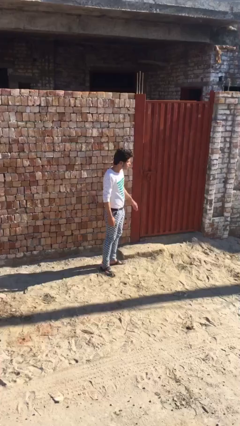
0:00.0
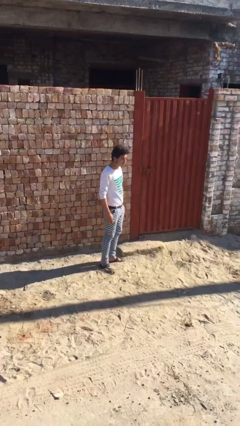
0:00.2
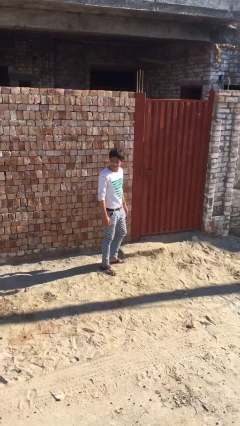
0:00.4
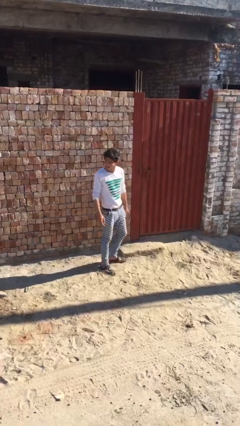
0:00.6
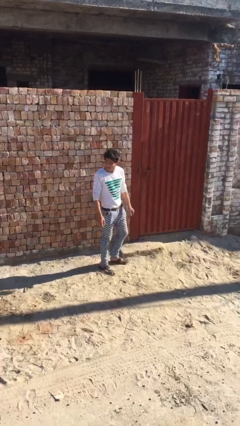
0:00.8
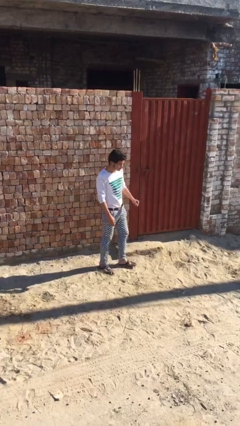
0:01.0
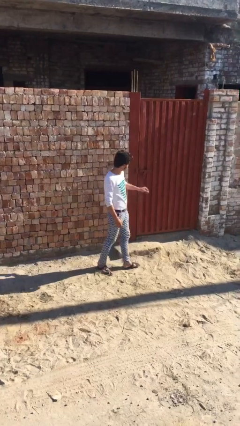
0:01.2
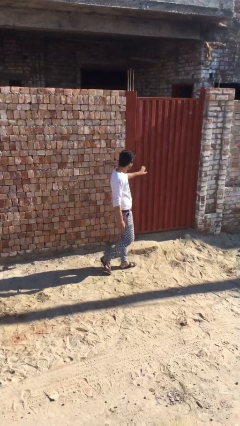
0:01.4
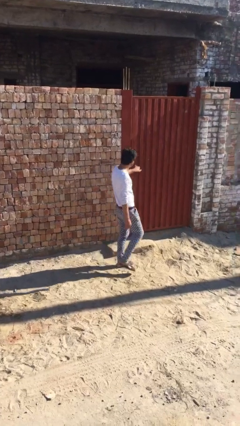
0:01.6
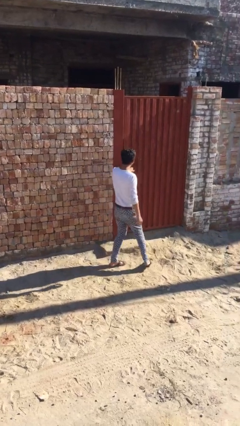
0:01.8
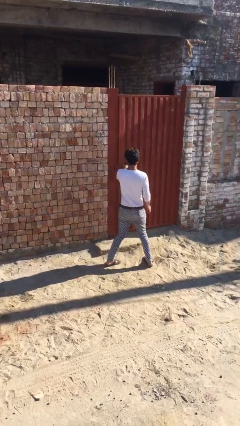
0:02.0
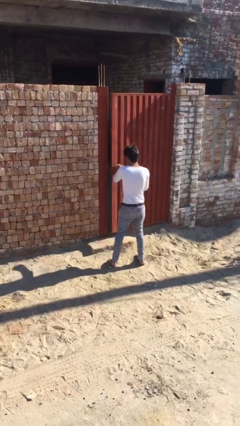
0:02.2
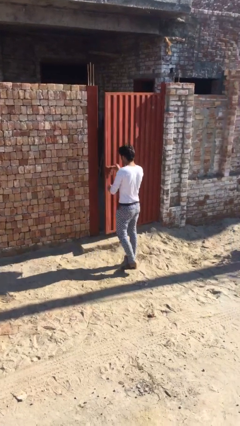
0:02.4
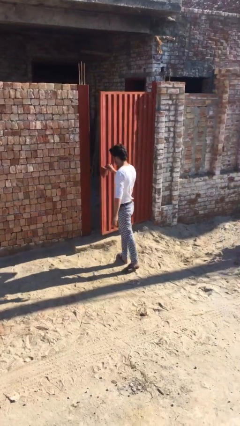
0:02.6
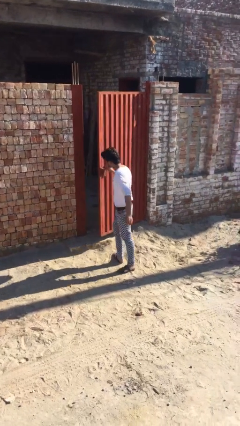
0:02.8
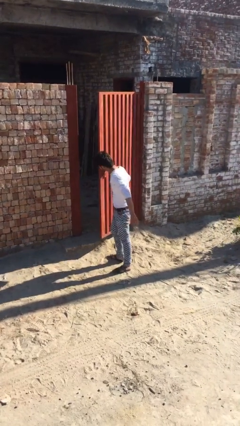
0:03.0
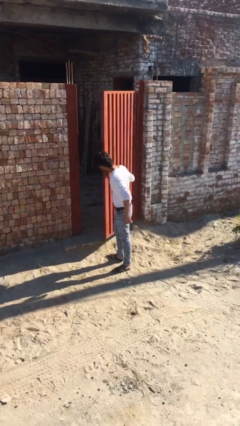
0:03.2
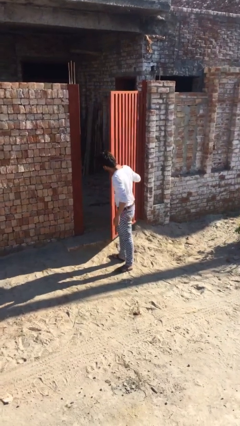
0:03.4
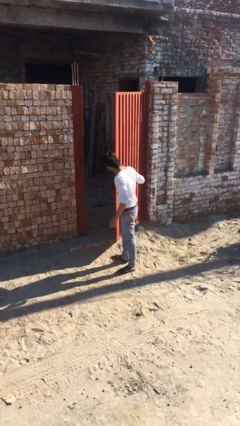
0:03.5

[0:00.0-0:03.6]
person opens facility door

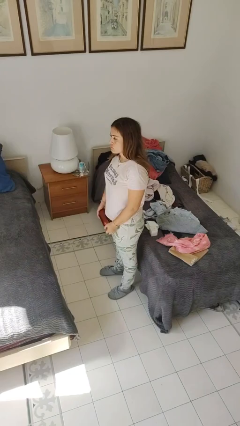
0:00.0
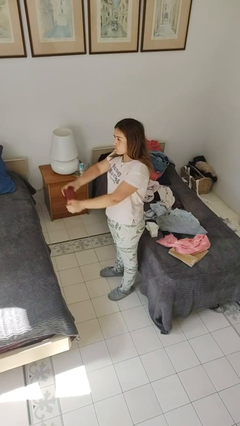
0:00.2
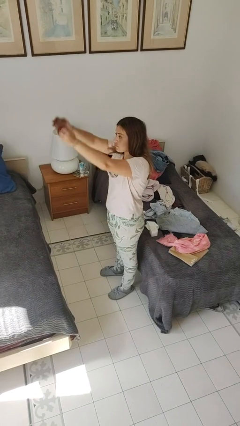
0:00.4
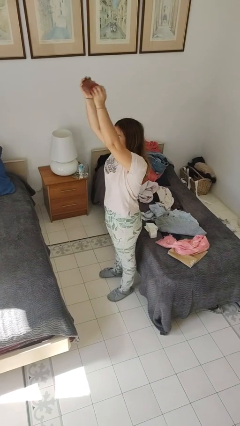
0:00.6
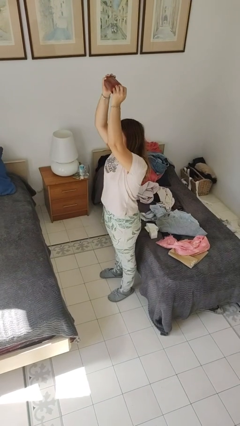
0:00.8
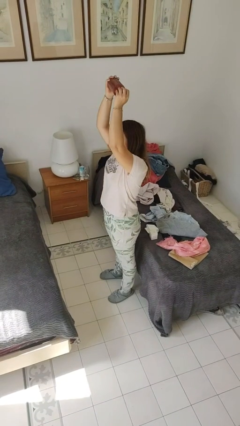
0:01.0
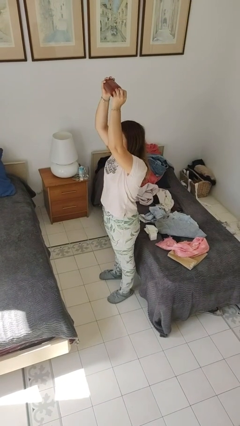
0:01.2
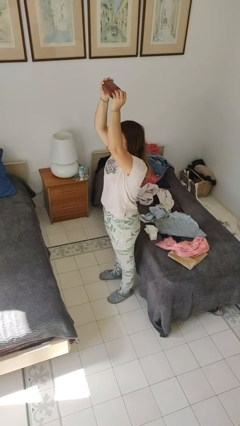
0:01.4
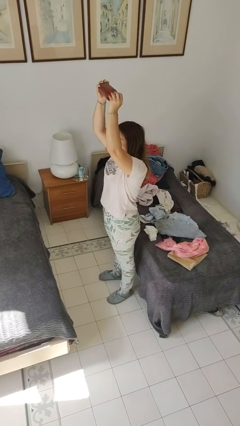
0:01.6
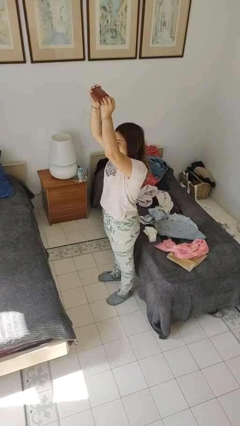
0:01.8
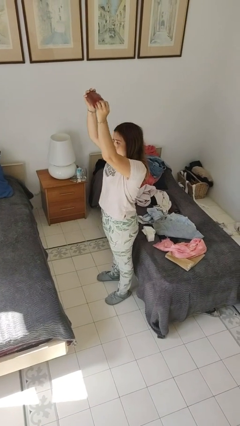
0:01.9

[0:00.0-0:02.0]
person holds object above head

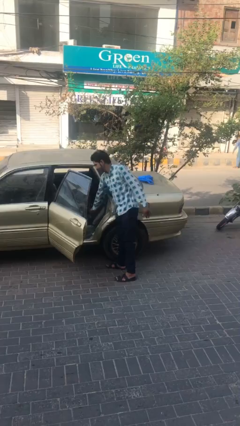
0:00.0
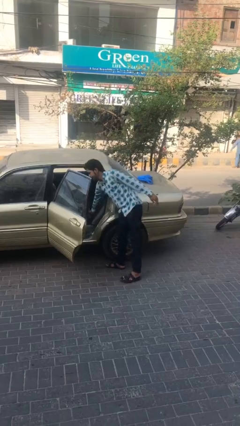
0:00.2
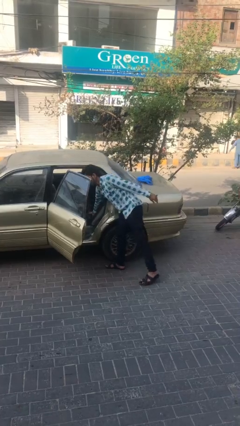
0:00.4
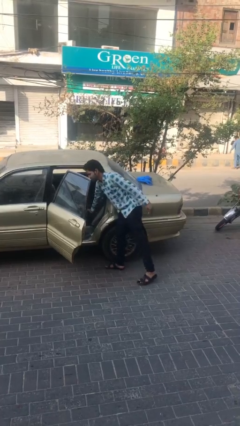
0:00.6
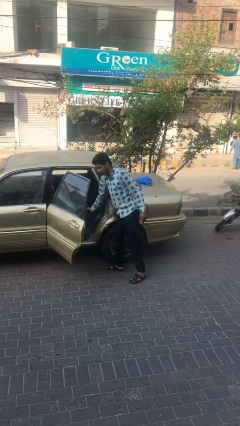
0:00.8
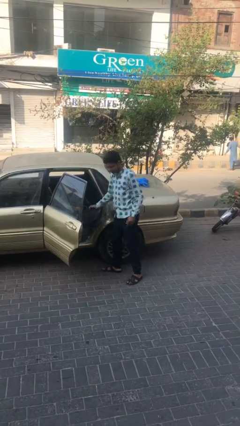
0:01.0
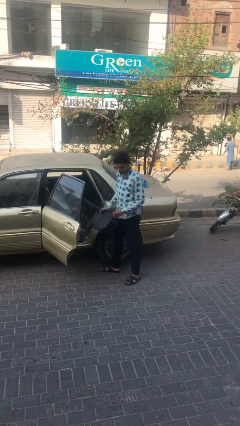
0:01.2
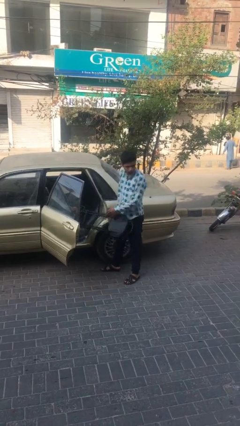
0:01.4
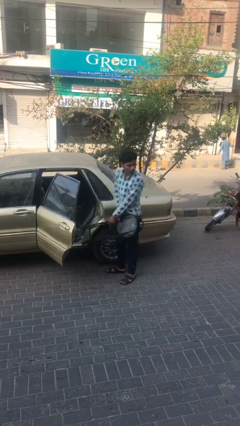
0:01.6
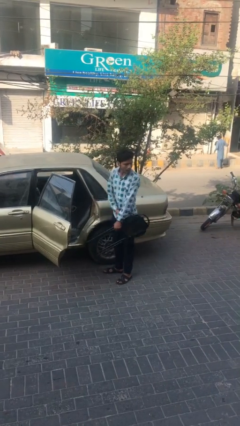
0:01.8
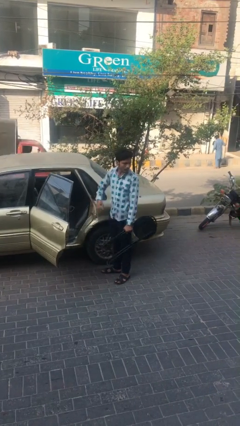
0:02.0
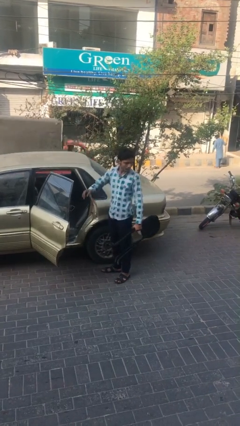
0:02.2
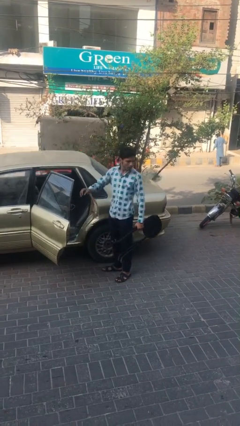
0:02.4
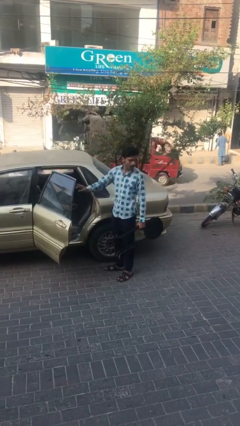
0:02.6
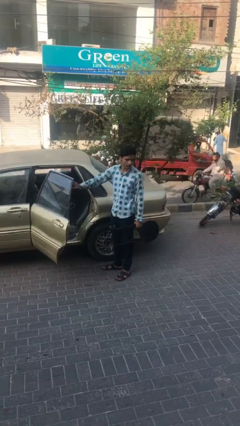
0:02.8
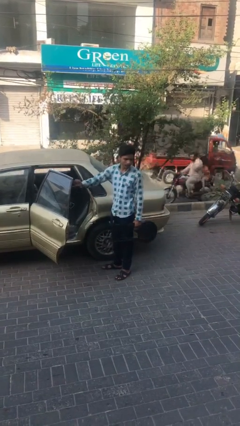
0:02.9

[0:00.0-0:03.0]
person unloads car

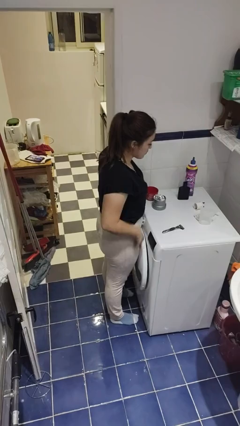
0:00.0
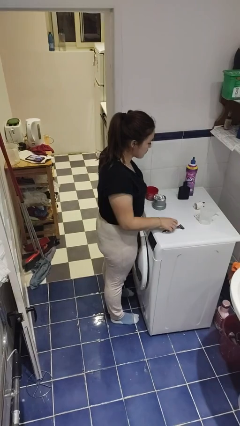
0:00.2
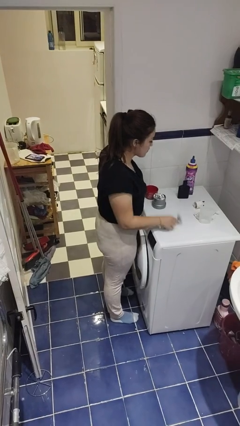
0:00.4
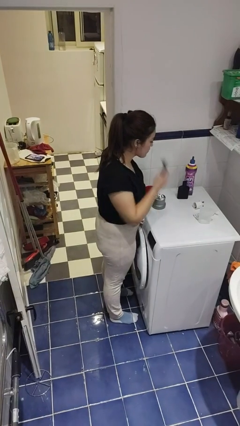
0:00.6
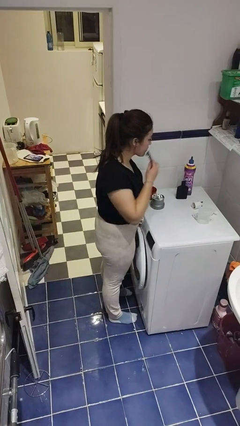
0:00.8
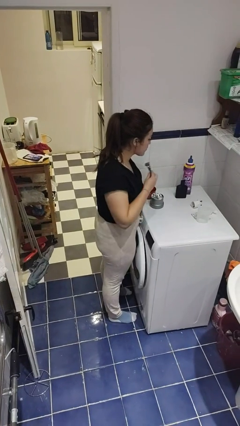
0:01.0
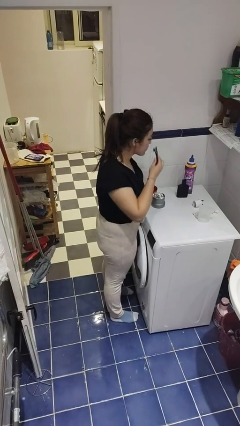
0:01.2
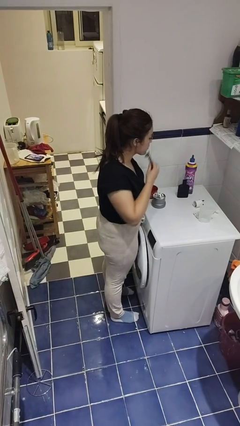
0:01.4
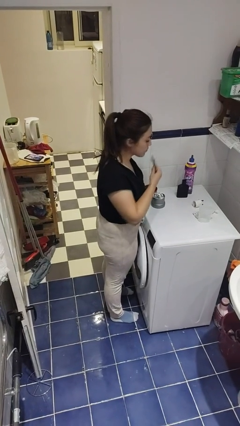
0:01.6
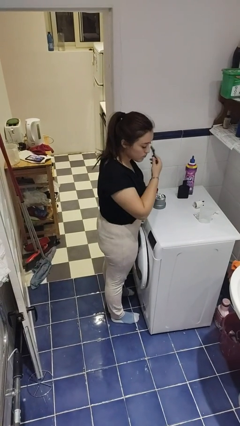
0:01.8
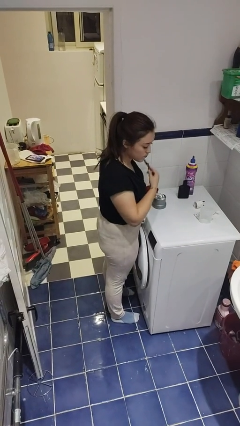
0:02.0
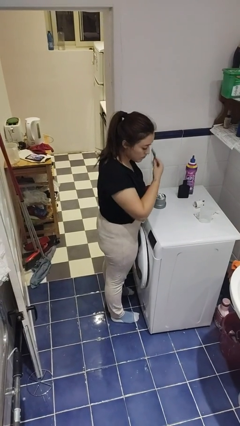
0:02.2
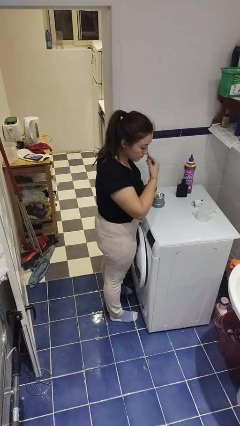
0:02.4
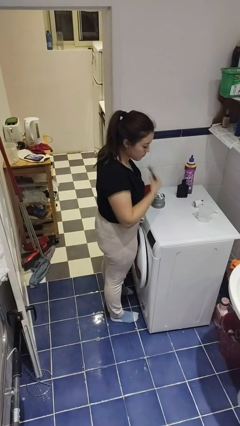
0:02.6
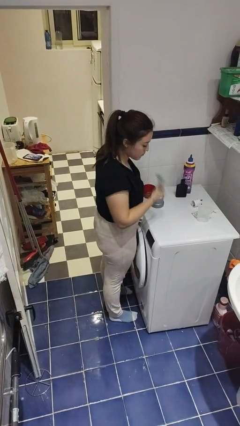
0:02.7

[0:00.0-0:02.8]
person shaves face

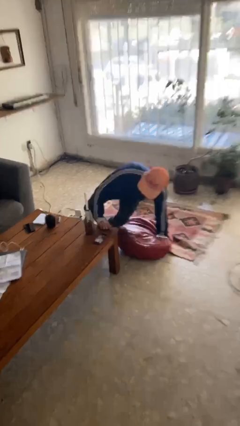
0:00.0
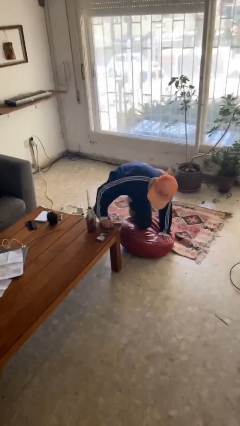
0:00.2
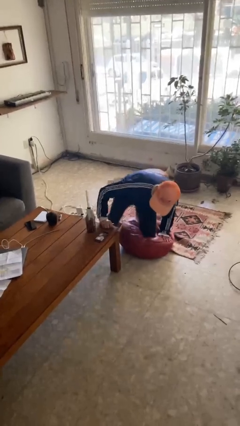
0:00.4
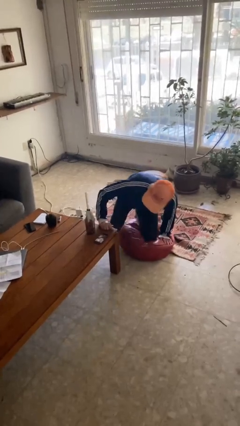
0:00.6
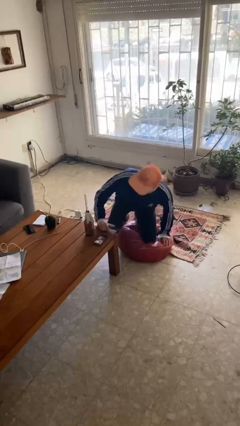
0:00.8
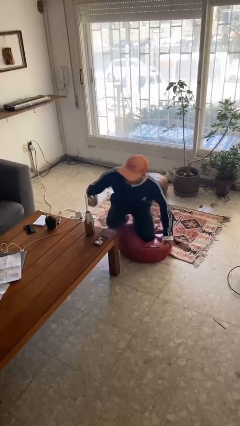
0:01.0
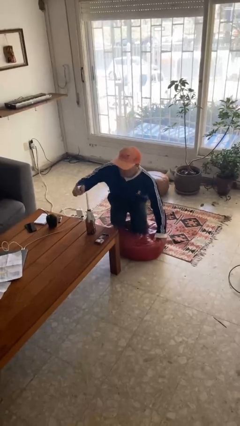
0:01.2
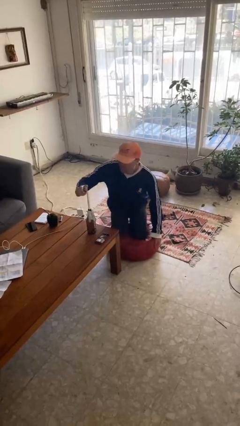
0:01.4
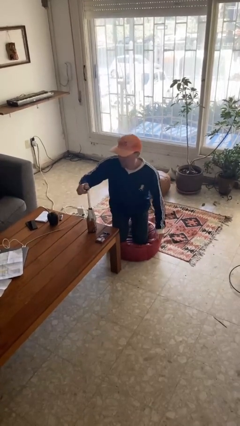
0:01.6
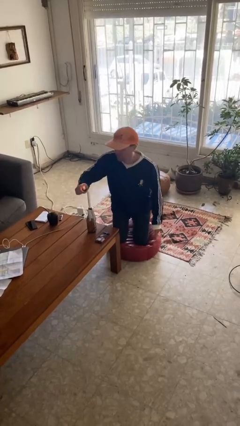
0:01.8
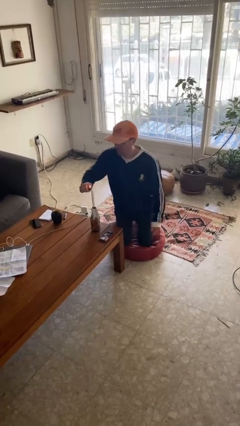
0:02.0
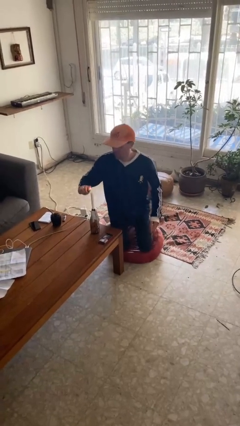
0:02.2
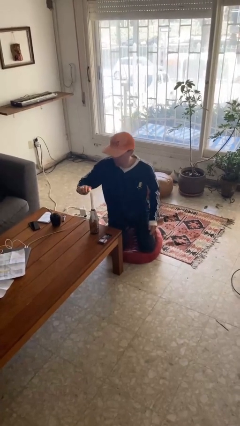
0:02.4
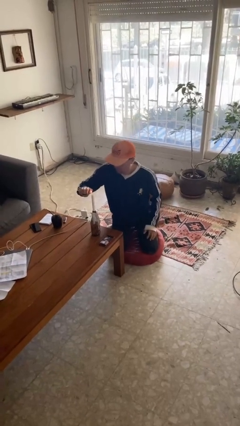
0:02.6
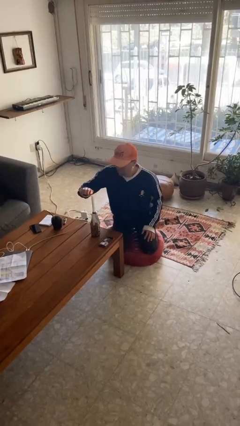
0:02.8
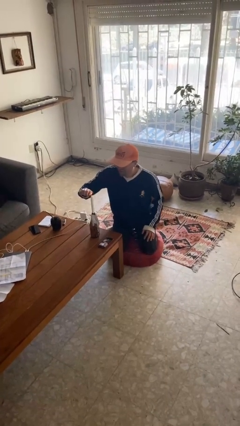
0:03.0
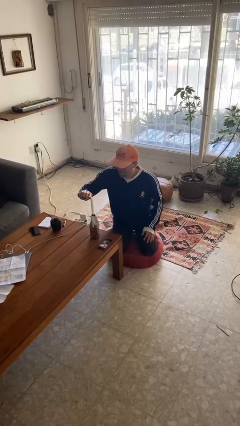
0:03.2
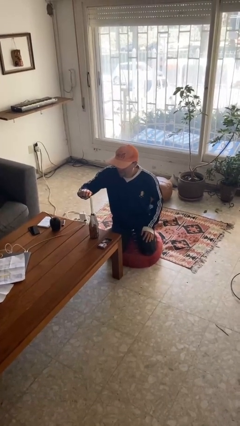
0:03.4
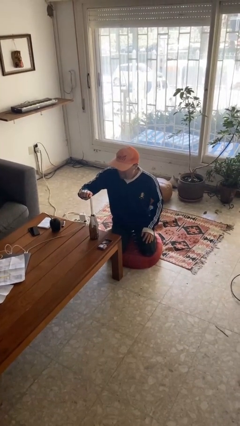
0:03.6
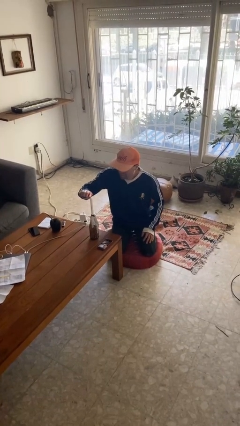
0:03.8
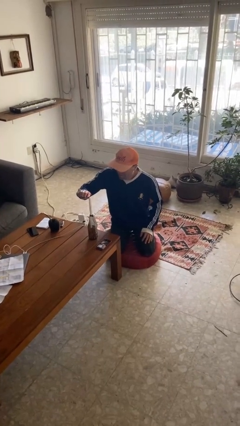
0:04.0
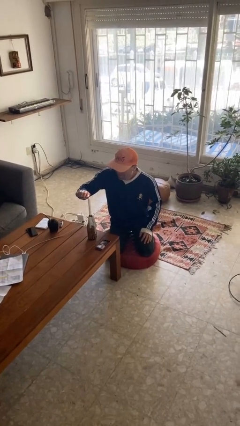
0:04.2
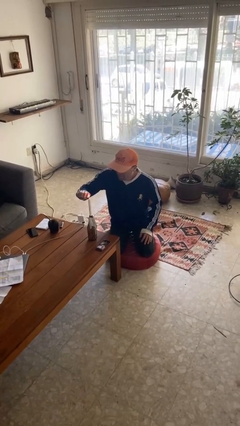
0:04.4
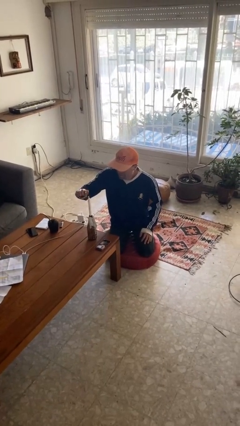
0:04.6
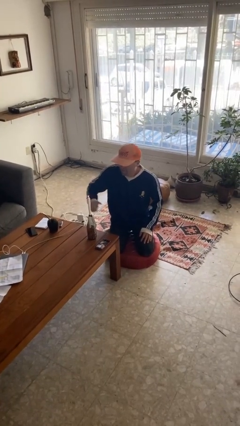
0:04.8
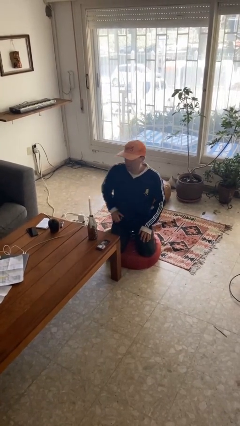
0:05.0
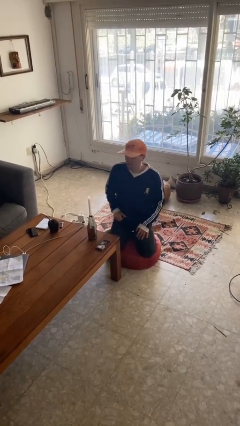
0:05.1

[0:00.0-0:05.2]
person lights candle

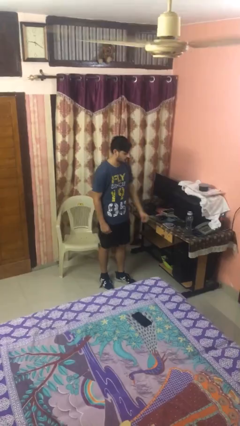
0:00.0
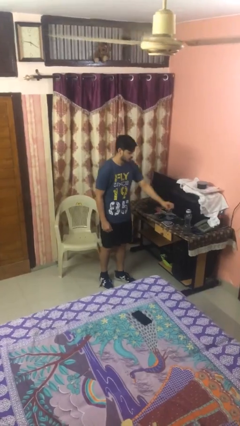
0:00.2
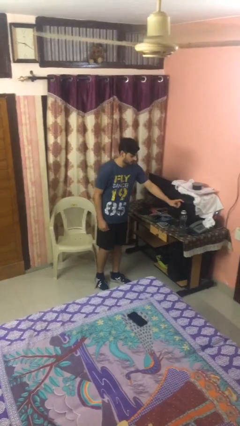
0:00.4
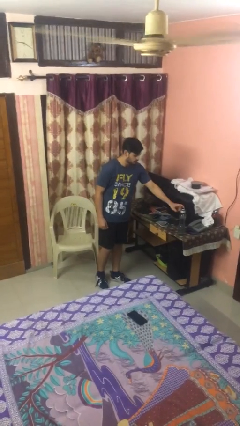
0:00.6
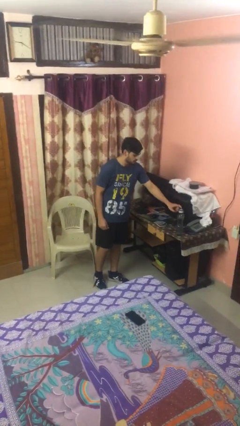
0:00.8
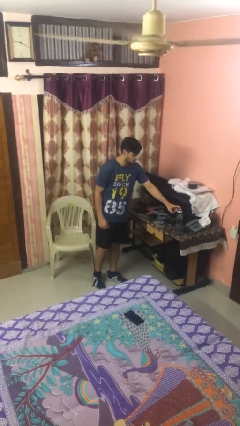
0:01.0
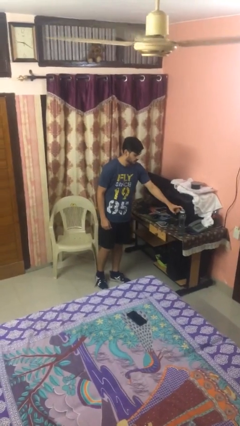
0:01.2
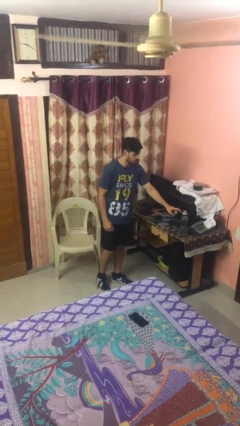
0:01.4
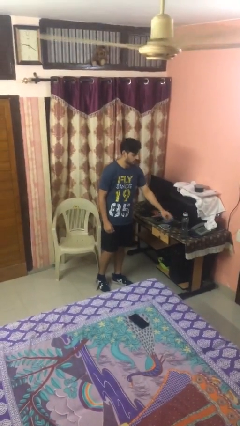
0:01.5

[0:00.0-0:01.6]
person taps object with finger
